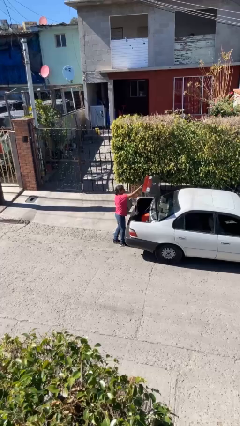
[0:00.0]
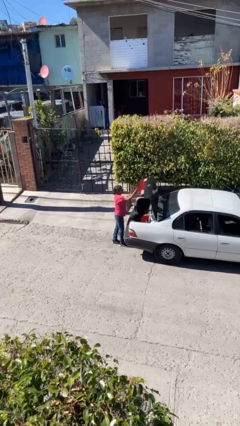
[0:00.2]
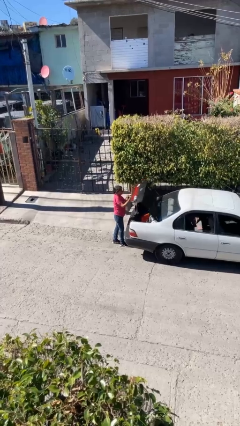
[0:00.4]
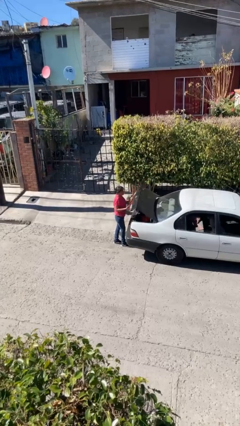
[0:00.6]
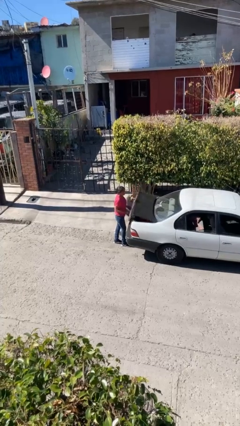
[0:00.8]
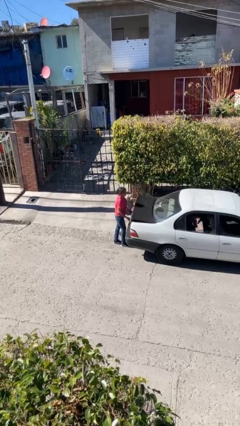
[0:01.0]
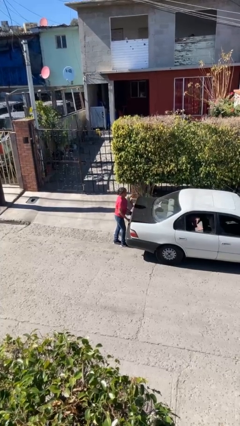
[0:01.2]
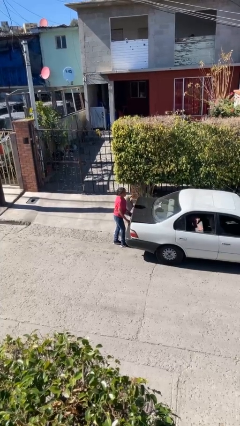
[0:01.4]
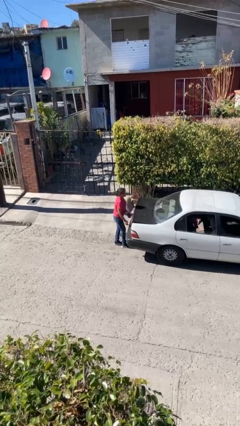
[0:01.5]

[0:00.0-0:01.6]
person closes car trunk

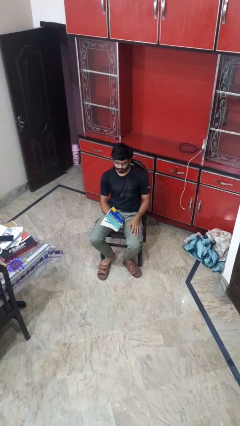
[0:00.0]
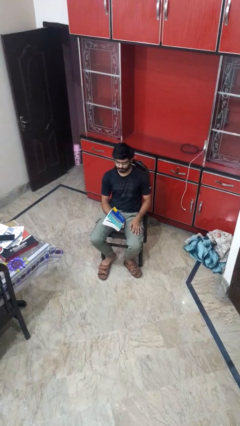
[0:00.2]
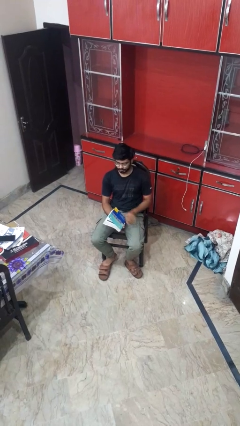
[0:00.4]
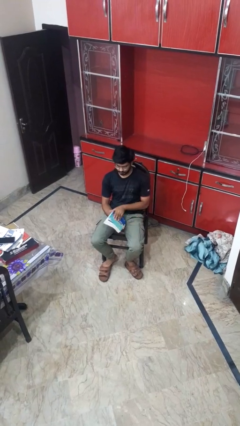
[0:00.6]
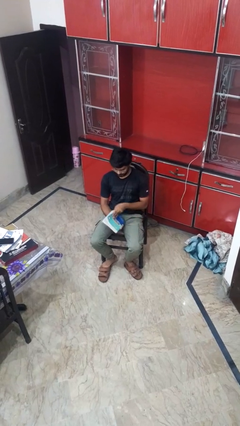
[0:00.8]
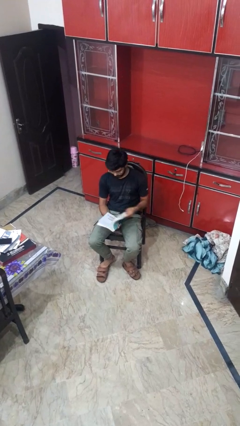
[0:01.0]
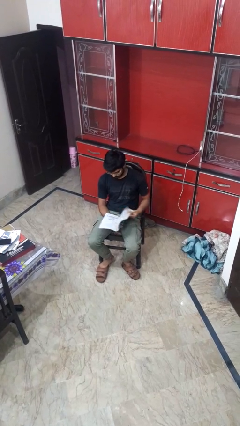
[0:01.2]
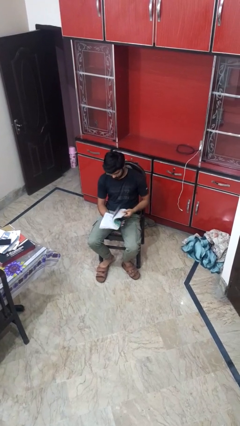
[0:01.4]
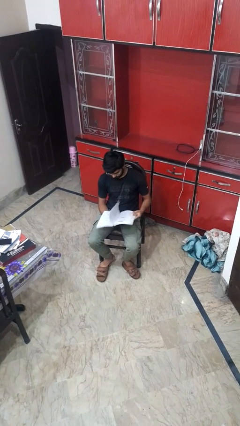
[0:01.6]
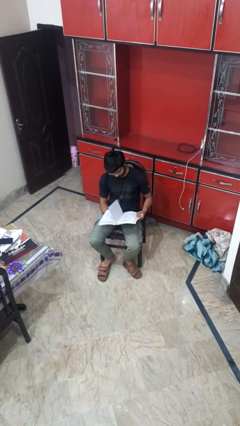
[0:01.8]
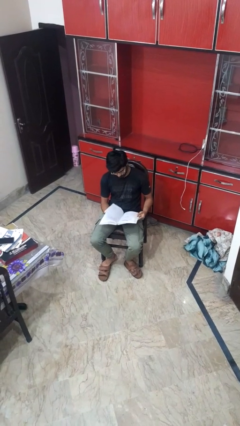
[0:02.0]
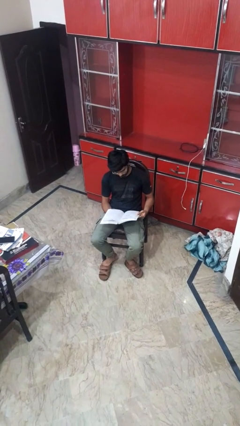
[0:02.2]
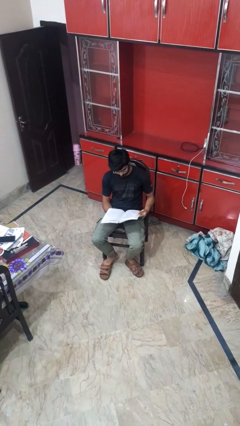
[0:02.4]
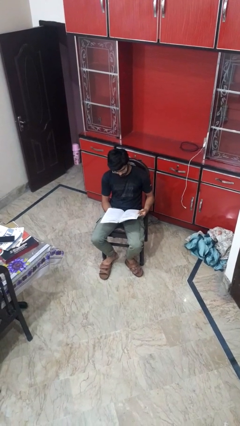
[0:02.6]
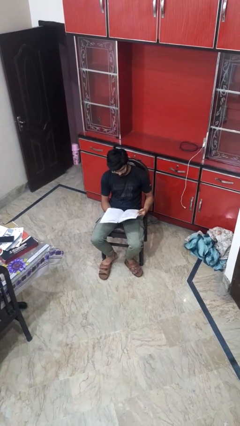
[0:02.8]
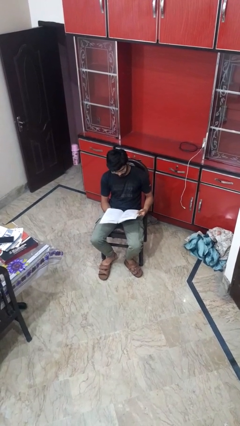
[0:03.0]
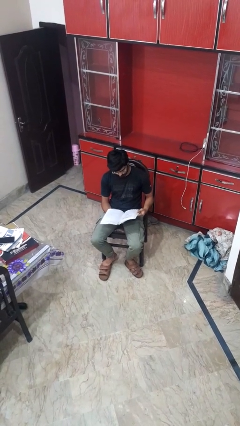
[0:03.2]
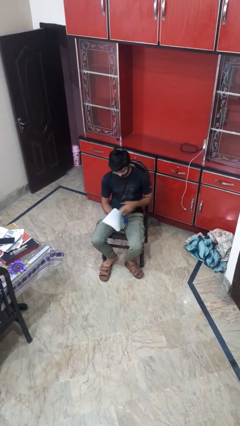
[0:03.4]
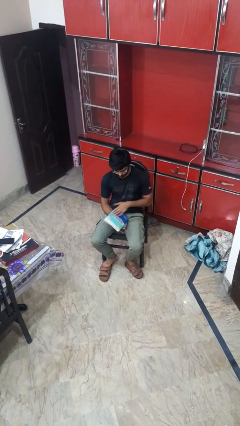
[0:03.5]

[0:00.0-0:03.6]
person reads book

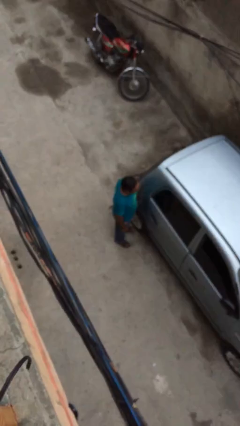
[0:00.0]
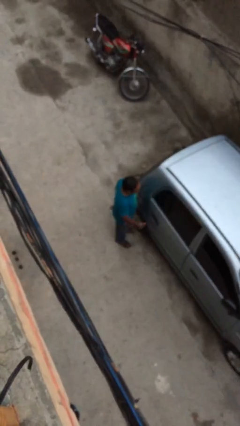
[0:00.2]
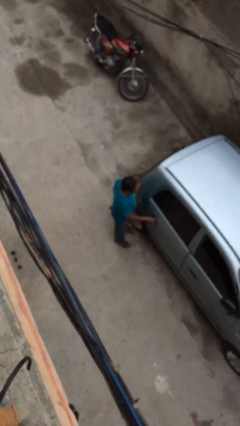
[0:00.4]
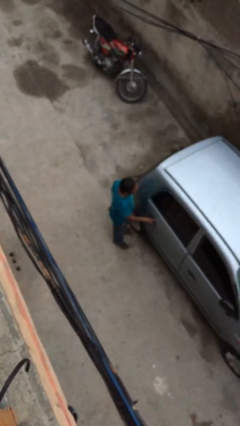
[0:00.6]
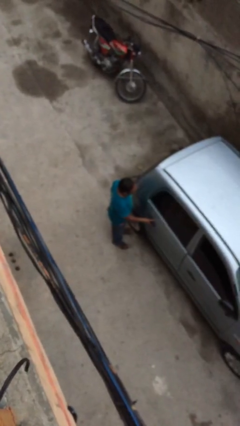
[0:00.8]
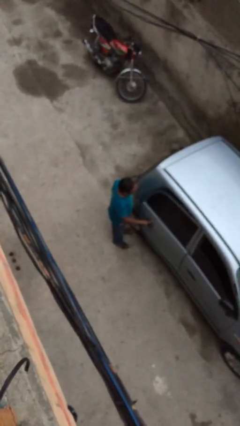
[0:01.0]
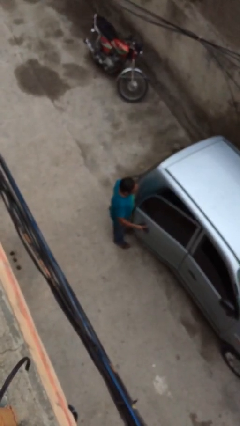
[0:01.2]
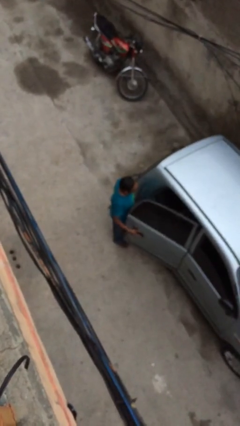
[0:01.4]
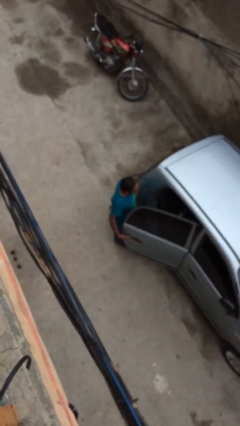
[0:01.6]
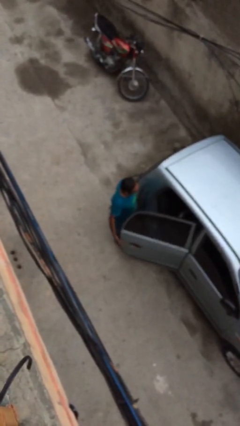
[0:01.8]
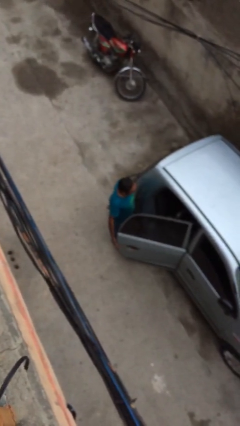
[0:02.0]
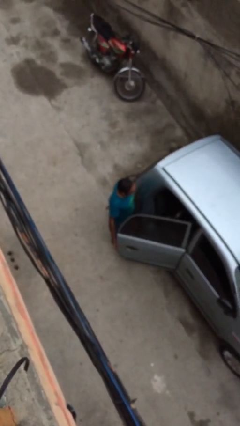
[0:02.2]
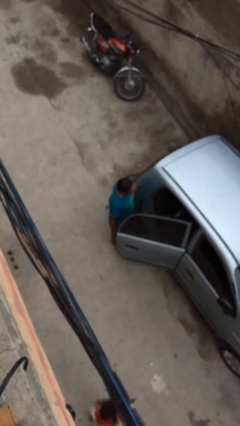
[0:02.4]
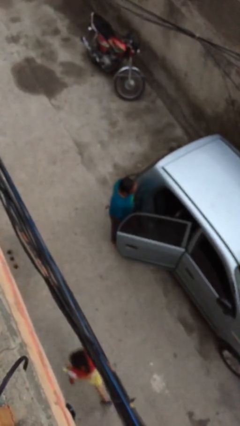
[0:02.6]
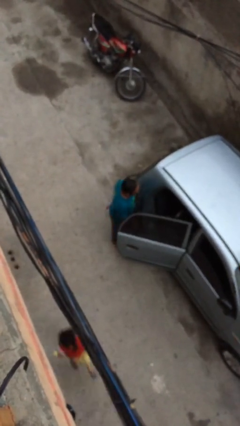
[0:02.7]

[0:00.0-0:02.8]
person opens car door

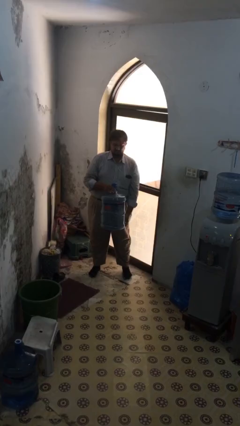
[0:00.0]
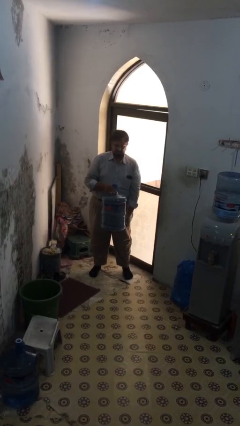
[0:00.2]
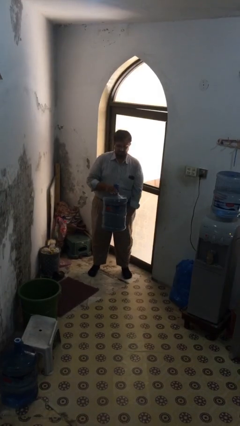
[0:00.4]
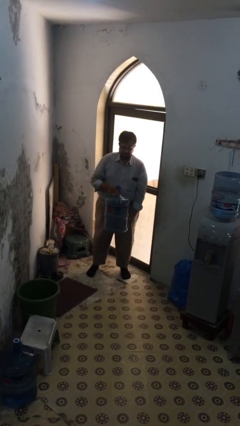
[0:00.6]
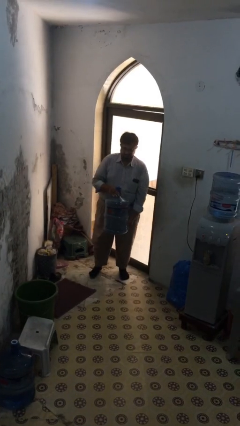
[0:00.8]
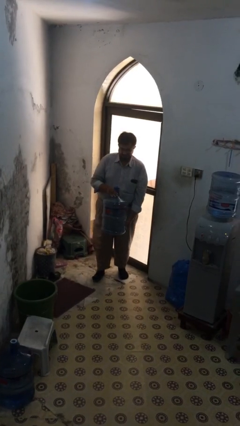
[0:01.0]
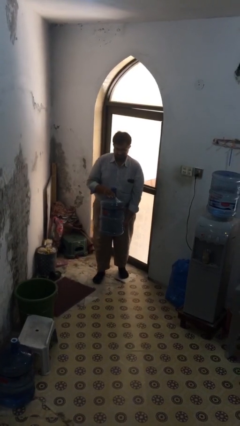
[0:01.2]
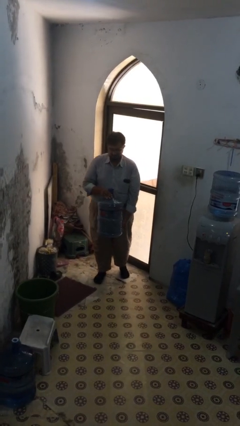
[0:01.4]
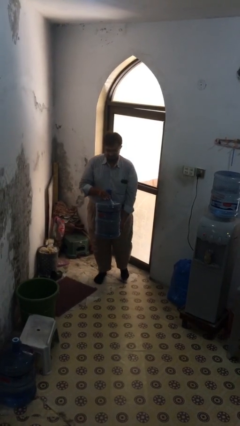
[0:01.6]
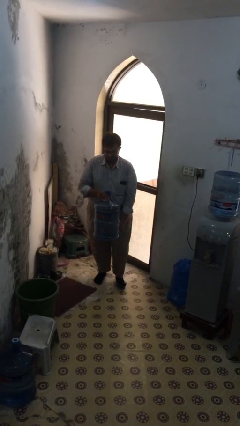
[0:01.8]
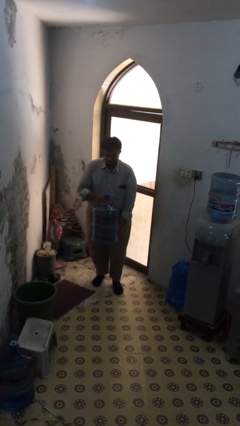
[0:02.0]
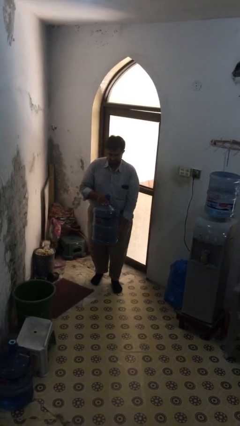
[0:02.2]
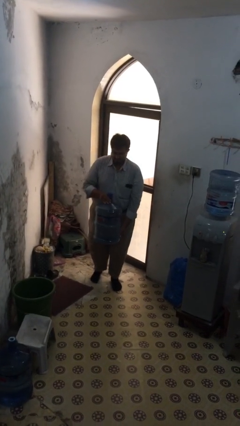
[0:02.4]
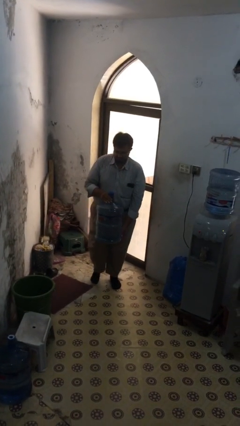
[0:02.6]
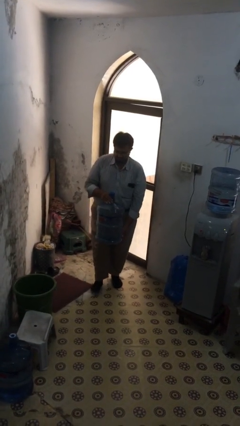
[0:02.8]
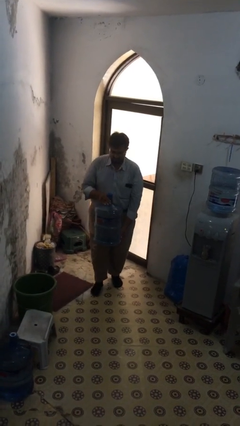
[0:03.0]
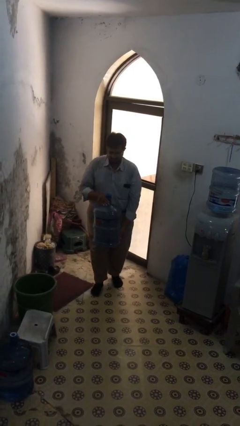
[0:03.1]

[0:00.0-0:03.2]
person carries heavy object

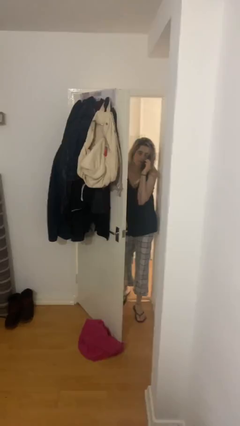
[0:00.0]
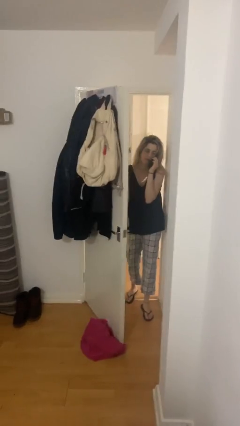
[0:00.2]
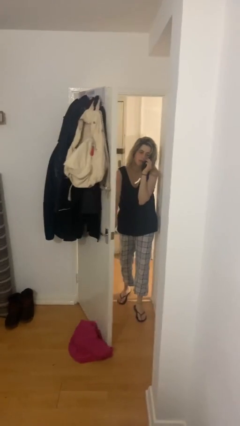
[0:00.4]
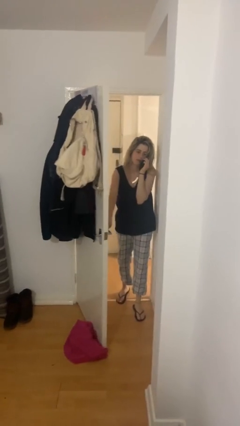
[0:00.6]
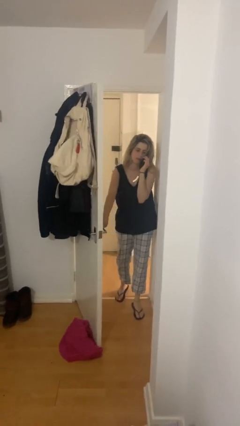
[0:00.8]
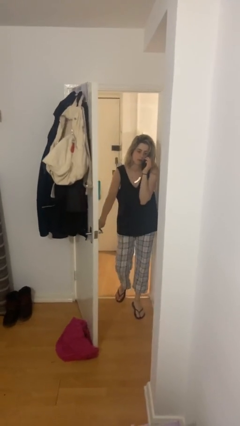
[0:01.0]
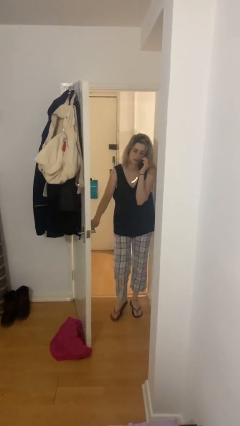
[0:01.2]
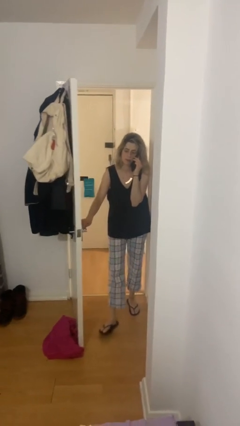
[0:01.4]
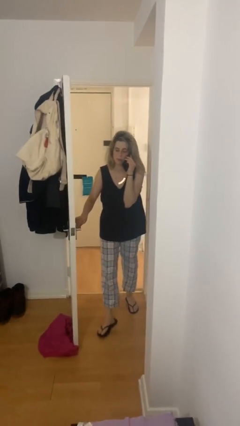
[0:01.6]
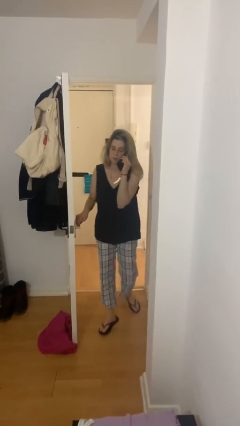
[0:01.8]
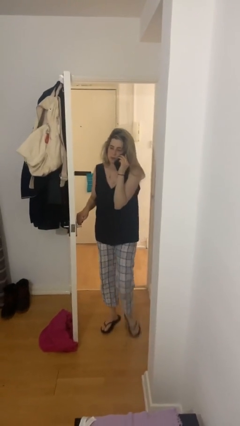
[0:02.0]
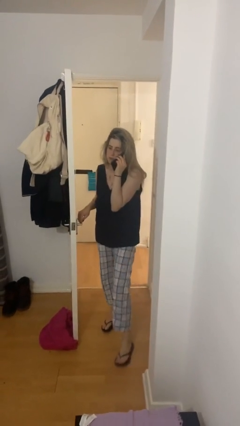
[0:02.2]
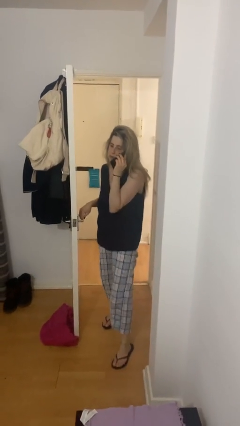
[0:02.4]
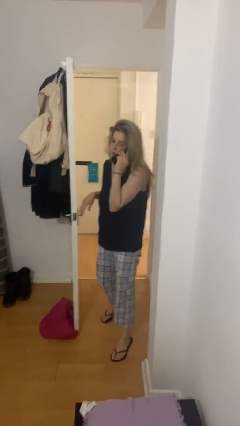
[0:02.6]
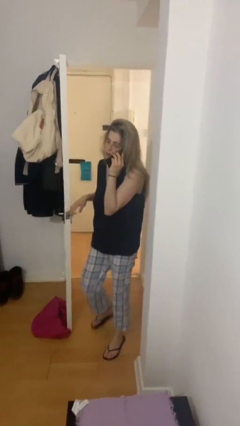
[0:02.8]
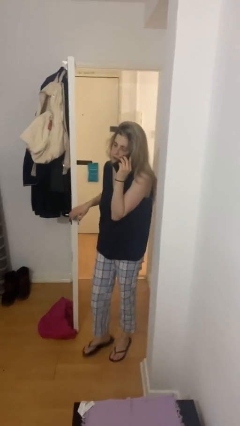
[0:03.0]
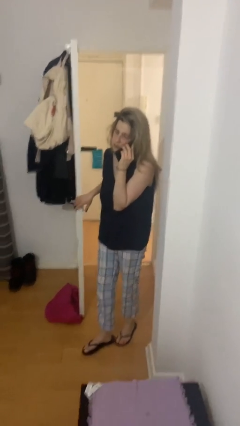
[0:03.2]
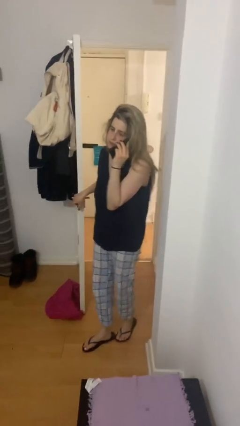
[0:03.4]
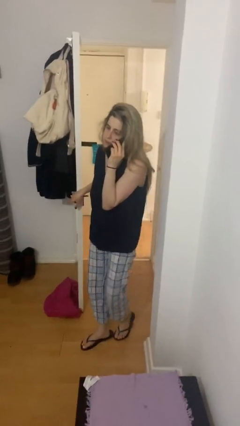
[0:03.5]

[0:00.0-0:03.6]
person enters scene through structure

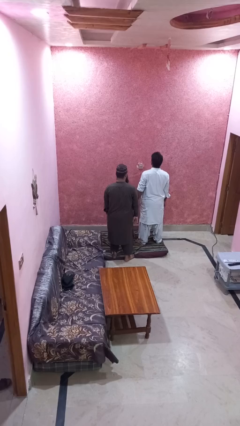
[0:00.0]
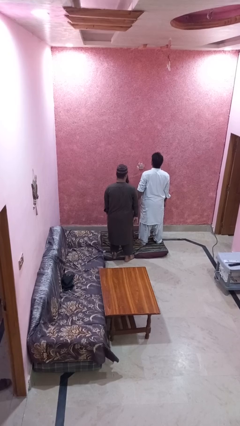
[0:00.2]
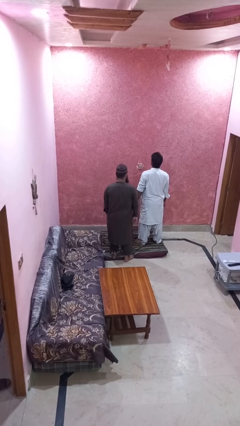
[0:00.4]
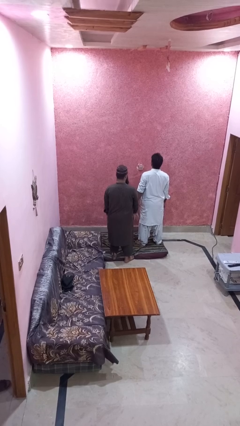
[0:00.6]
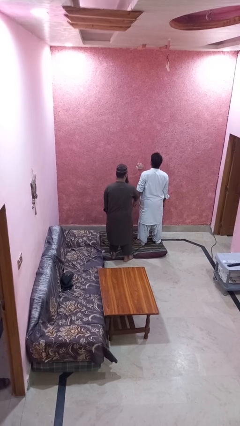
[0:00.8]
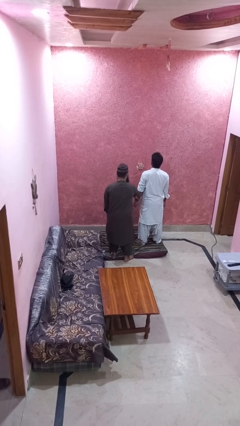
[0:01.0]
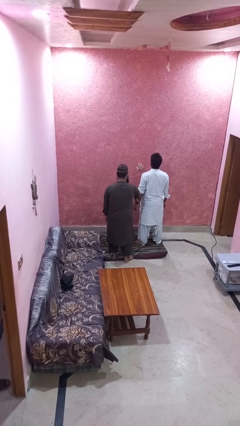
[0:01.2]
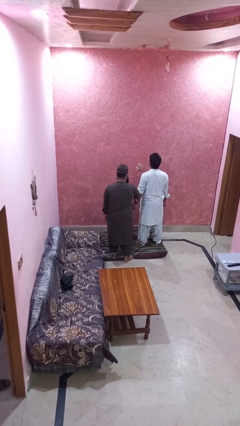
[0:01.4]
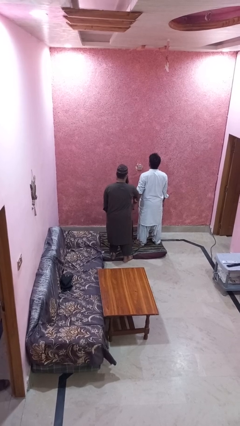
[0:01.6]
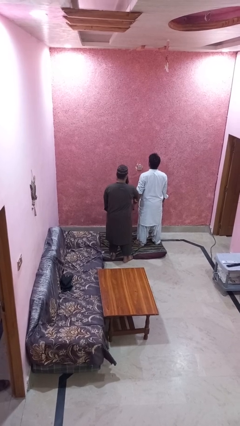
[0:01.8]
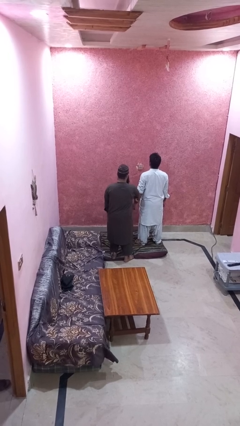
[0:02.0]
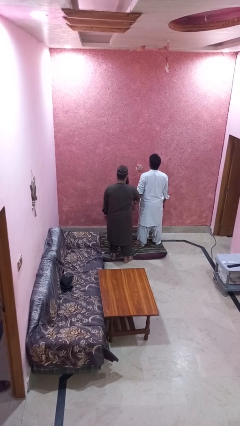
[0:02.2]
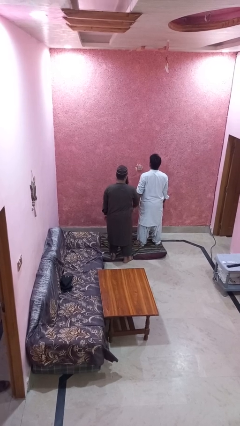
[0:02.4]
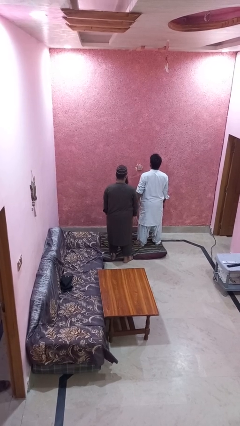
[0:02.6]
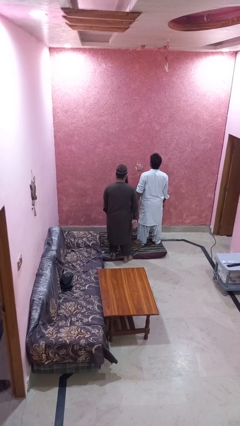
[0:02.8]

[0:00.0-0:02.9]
person grabs person by forearm
